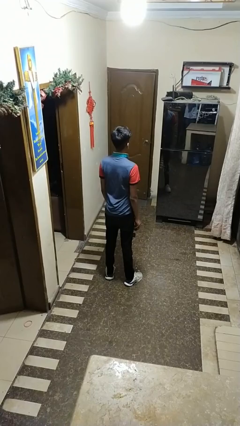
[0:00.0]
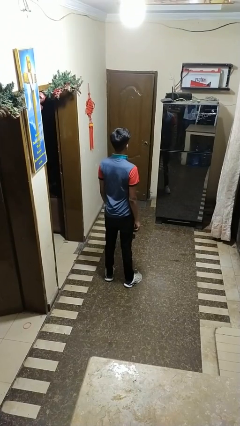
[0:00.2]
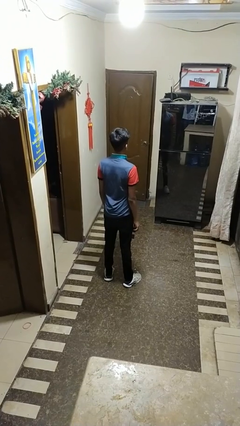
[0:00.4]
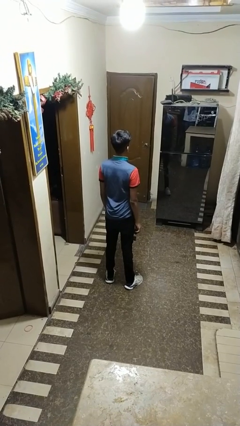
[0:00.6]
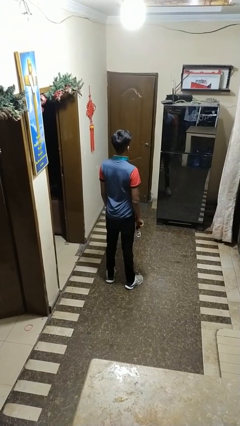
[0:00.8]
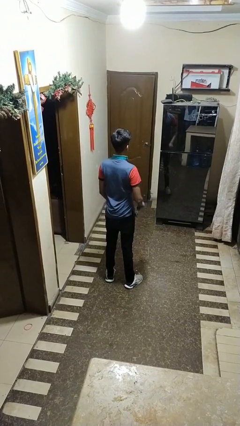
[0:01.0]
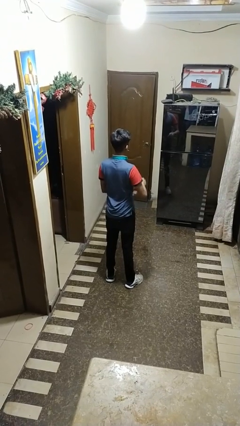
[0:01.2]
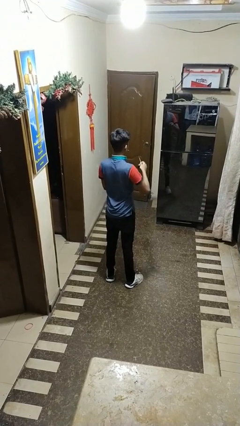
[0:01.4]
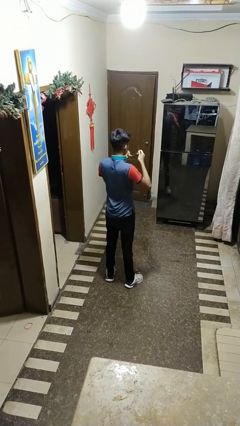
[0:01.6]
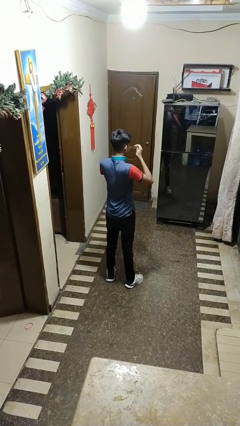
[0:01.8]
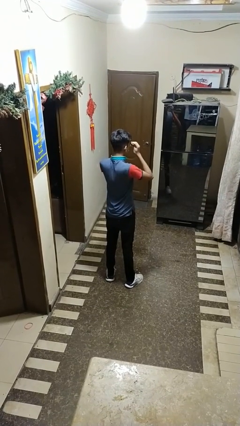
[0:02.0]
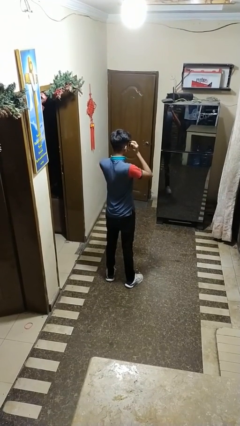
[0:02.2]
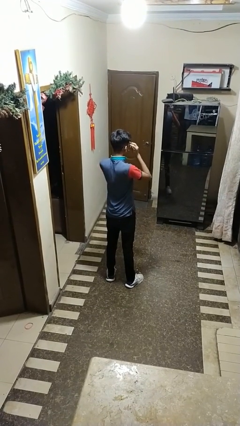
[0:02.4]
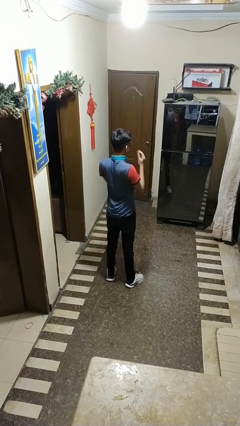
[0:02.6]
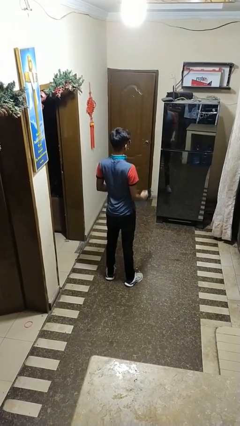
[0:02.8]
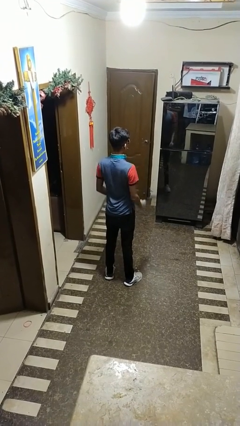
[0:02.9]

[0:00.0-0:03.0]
person puts on sunglasses

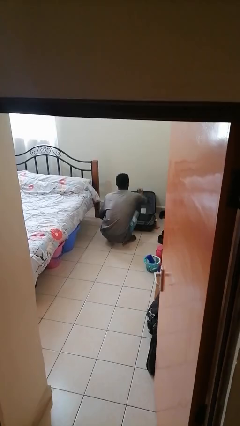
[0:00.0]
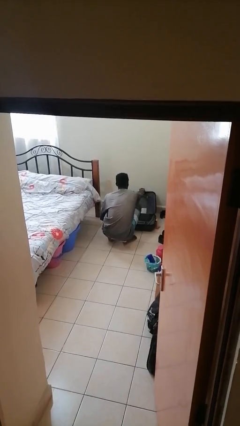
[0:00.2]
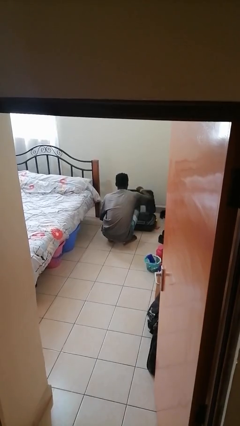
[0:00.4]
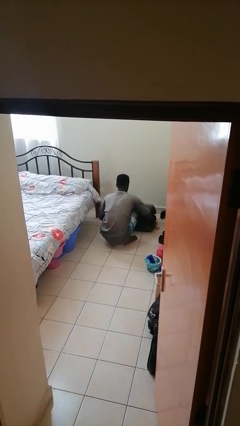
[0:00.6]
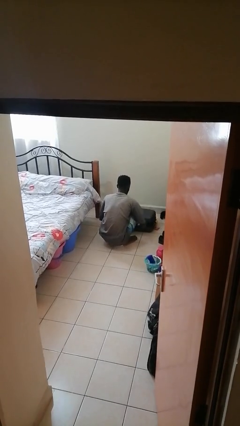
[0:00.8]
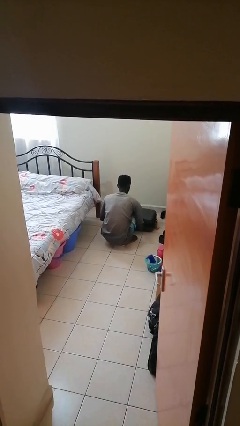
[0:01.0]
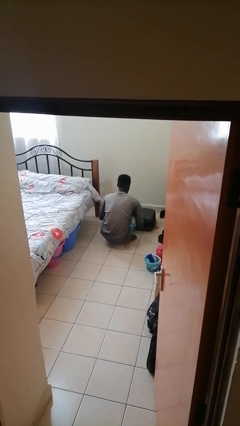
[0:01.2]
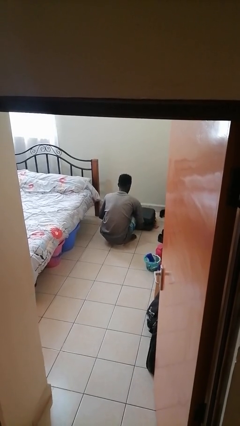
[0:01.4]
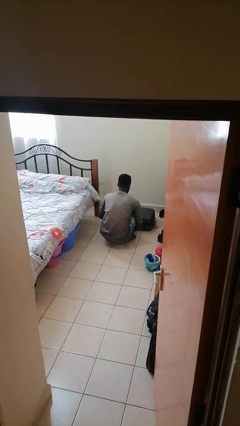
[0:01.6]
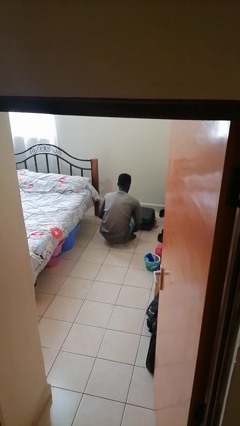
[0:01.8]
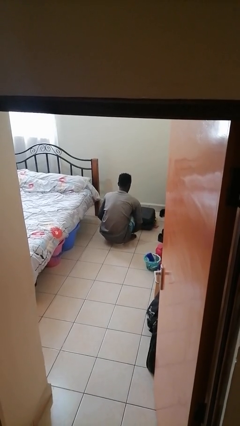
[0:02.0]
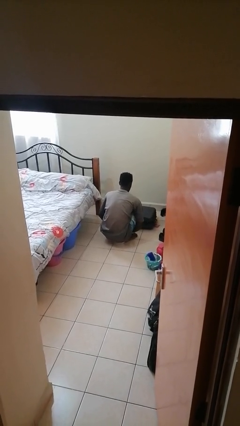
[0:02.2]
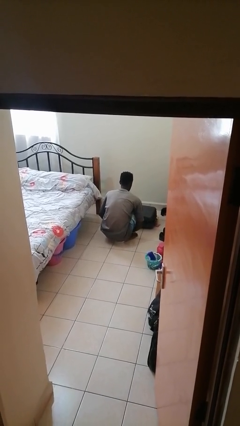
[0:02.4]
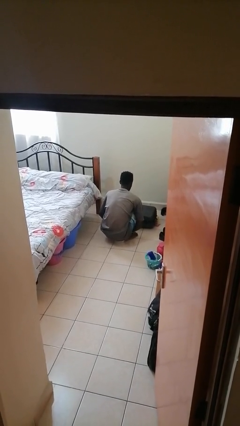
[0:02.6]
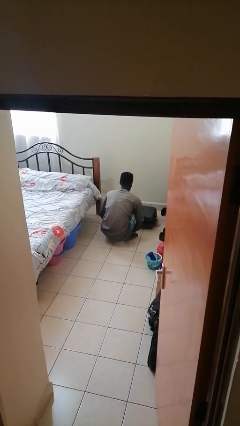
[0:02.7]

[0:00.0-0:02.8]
person closes suitcase

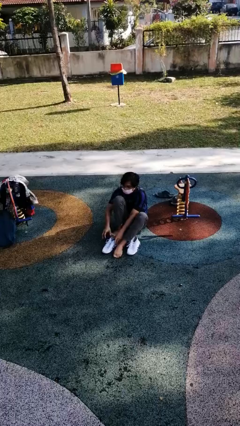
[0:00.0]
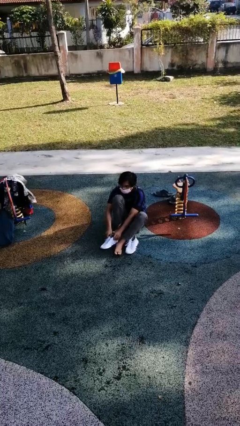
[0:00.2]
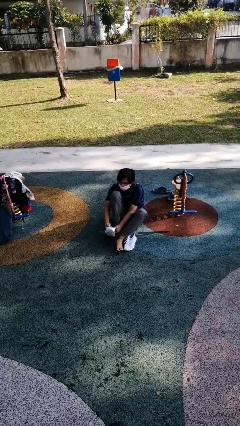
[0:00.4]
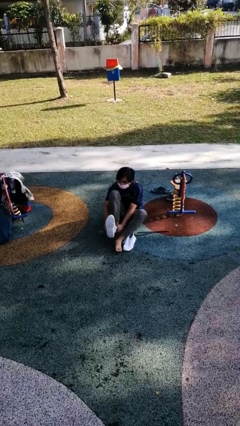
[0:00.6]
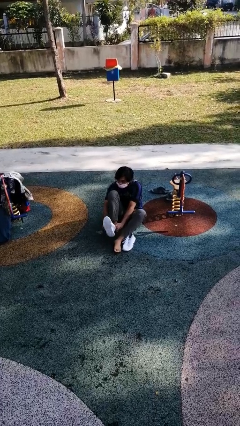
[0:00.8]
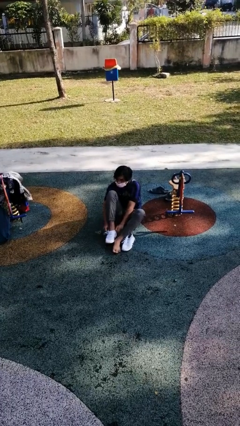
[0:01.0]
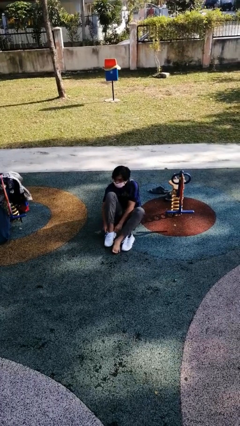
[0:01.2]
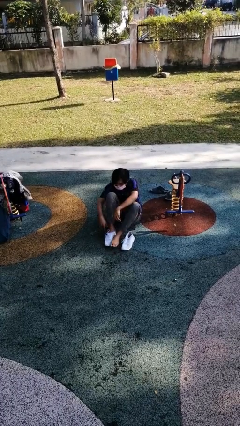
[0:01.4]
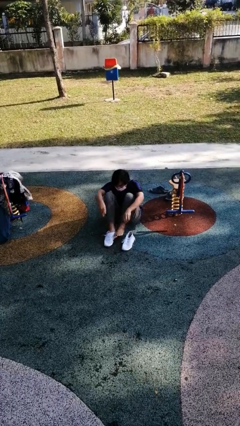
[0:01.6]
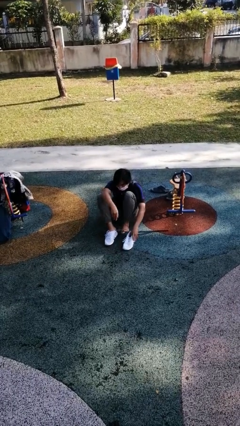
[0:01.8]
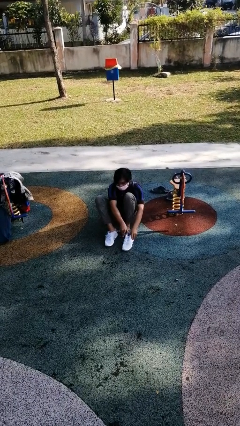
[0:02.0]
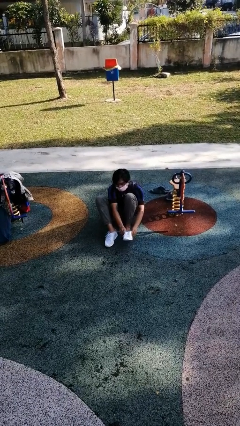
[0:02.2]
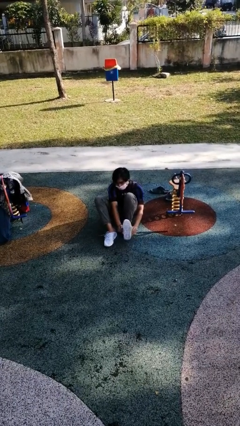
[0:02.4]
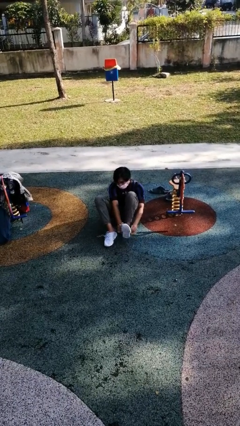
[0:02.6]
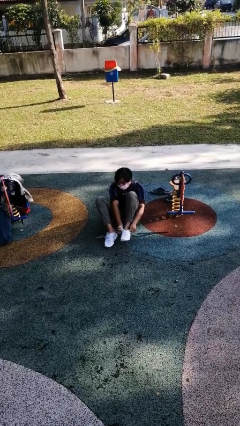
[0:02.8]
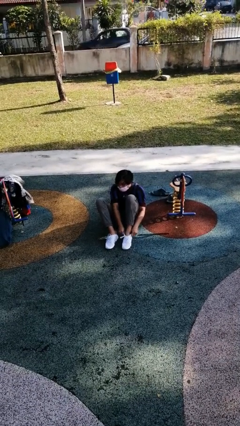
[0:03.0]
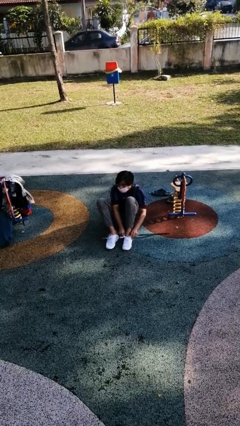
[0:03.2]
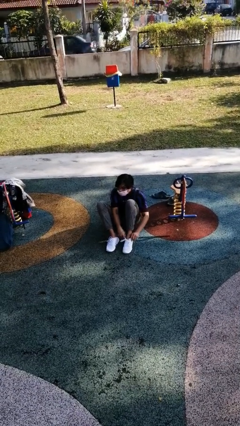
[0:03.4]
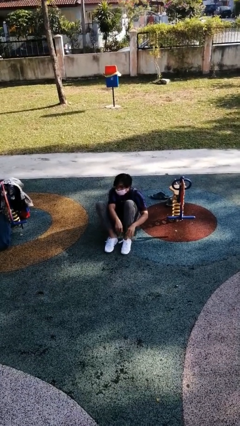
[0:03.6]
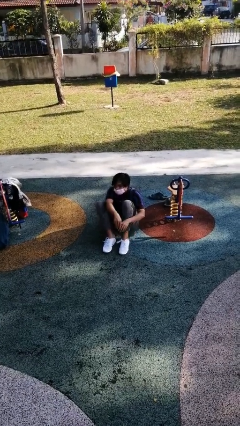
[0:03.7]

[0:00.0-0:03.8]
person puts on shoes

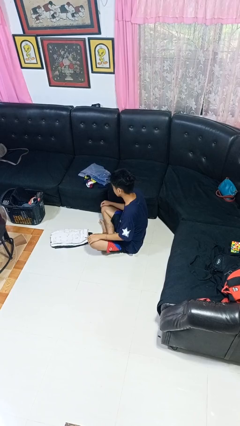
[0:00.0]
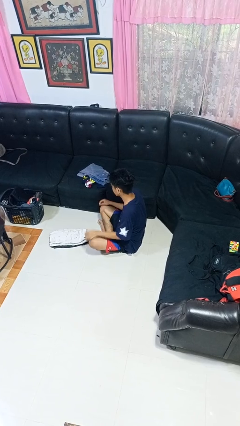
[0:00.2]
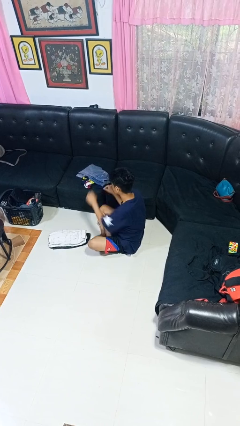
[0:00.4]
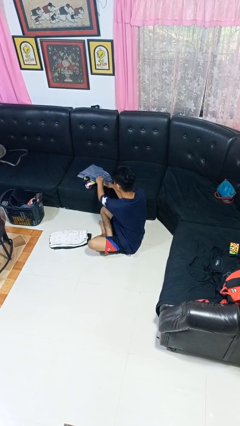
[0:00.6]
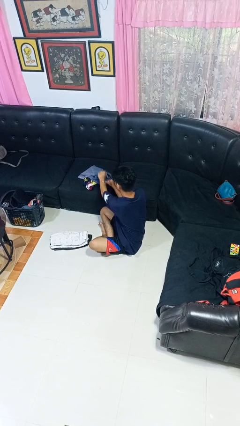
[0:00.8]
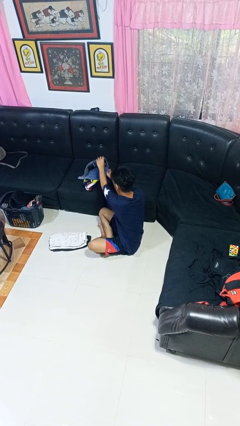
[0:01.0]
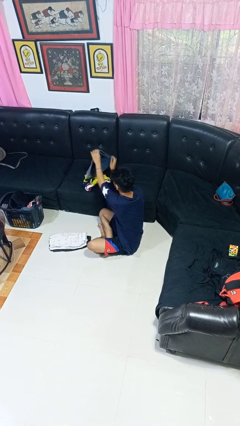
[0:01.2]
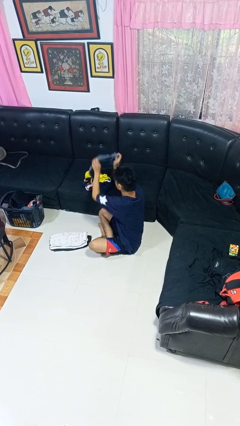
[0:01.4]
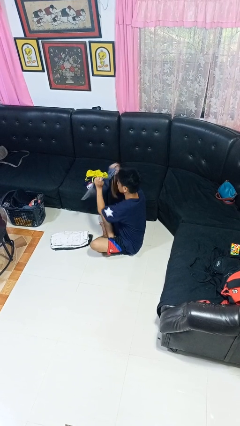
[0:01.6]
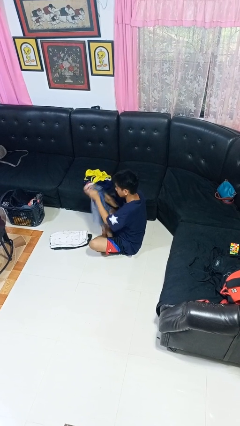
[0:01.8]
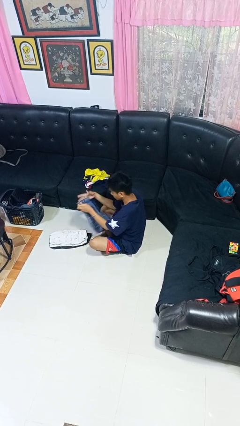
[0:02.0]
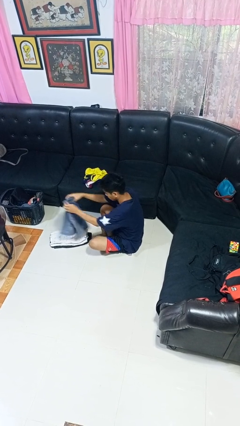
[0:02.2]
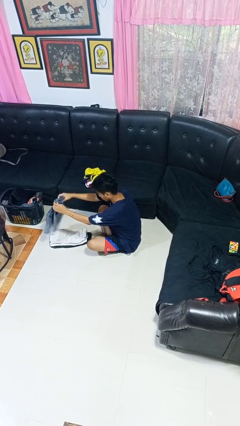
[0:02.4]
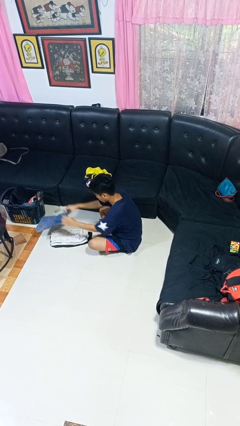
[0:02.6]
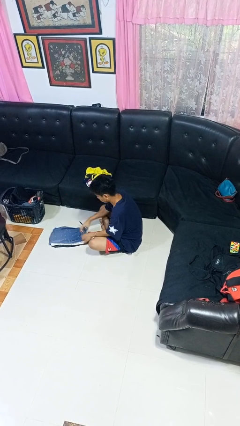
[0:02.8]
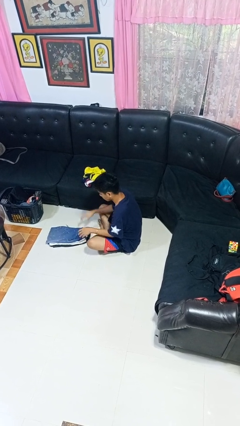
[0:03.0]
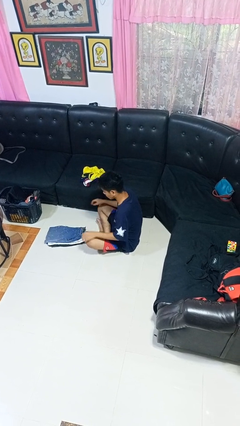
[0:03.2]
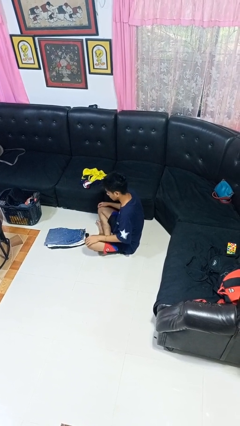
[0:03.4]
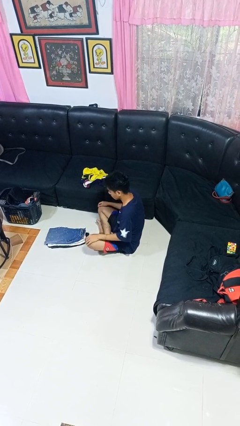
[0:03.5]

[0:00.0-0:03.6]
person folds pants

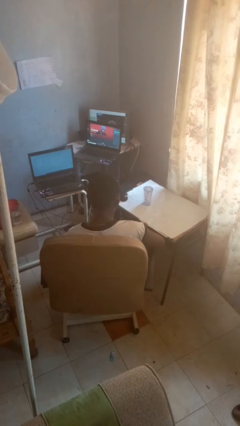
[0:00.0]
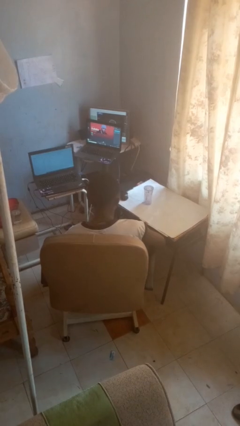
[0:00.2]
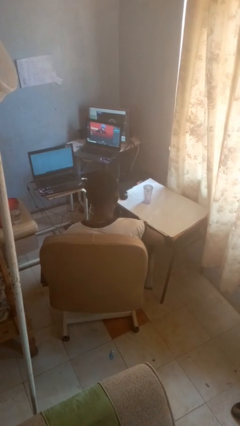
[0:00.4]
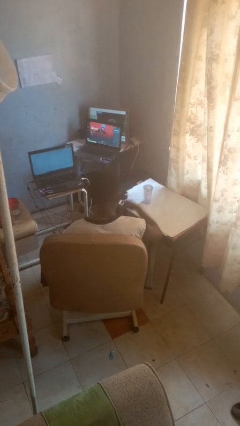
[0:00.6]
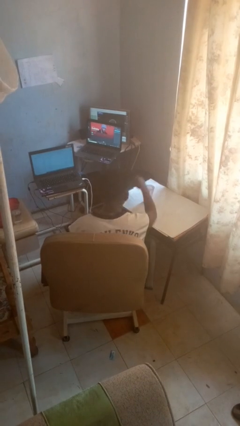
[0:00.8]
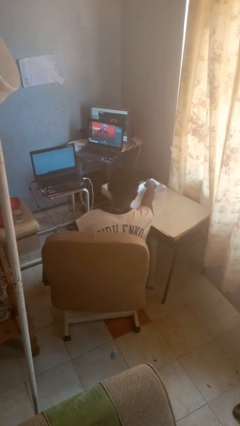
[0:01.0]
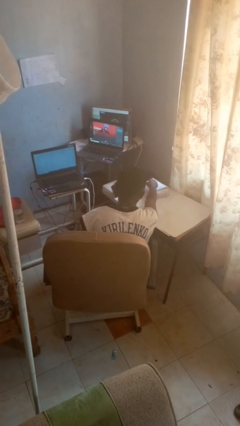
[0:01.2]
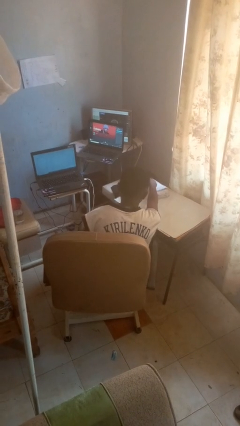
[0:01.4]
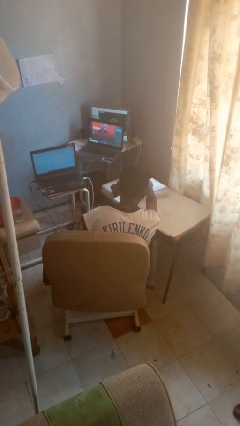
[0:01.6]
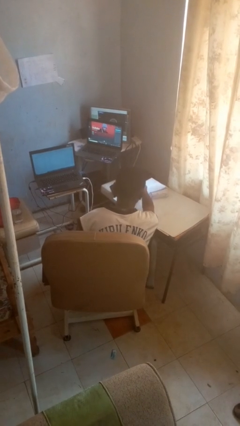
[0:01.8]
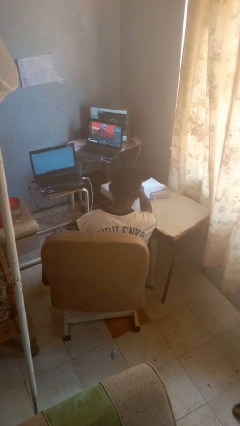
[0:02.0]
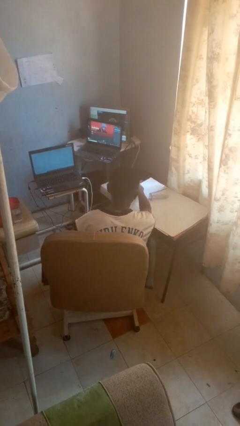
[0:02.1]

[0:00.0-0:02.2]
person knocks over glass

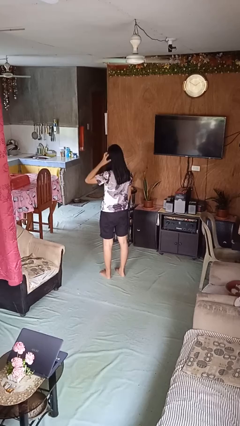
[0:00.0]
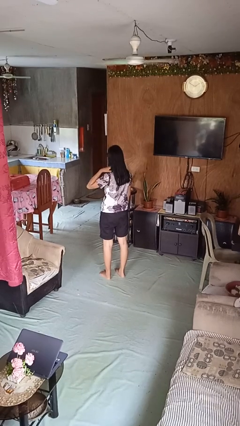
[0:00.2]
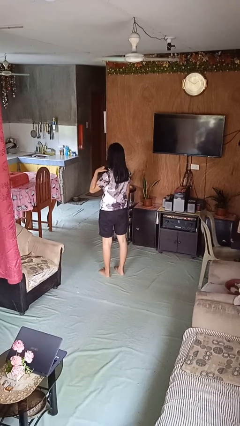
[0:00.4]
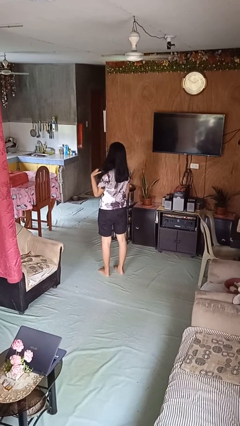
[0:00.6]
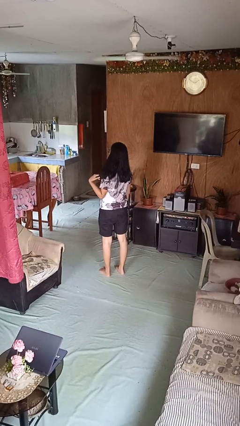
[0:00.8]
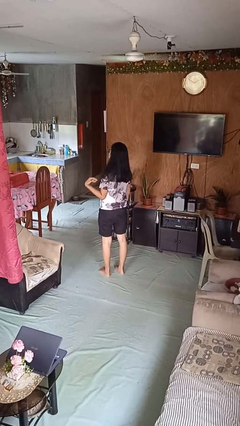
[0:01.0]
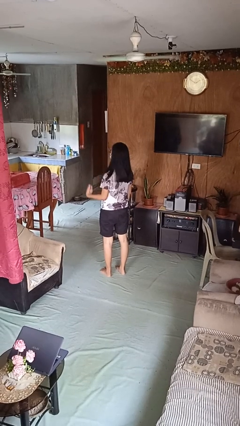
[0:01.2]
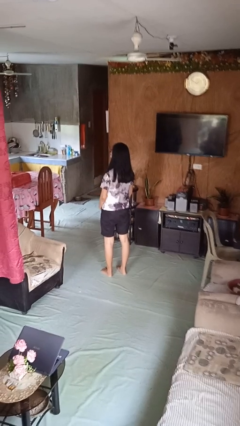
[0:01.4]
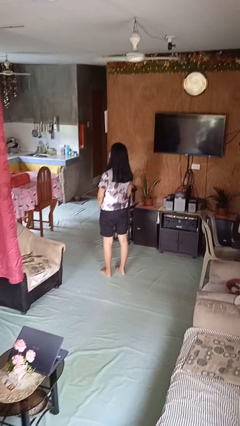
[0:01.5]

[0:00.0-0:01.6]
person strokes hair
